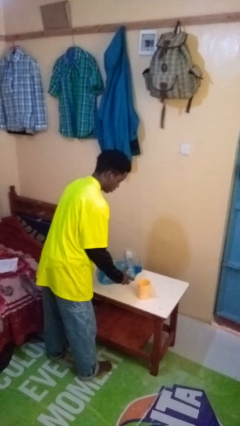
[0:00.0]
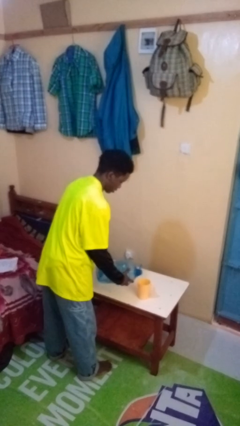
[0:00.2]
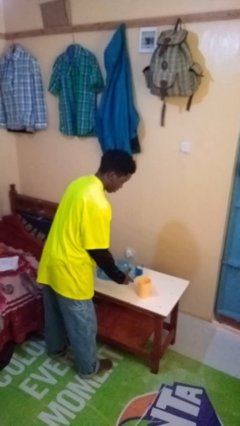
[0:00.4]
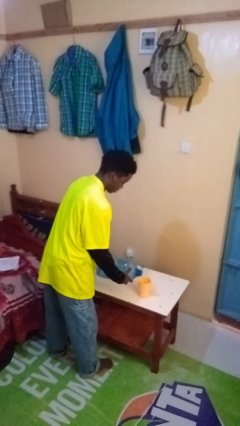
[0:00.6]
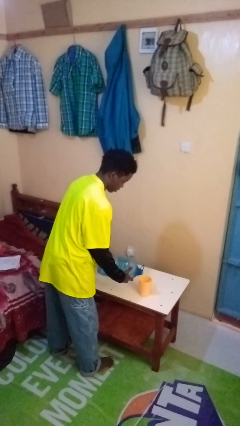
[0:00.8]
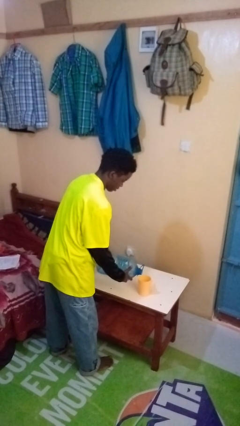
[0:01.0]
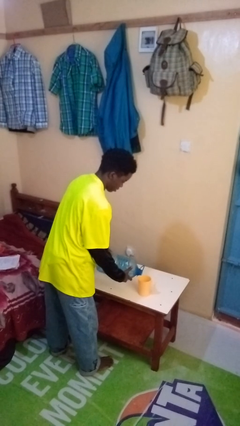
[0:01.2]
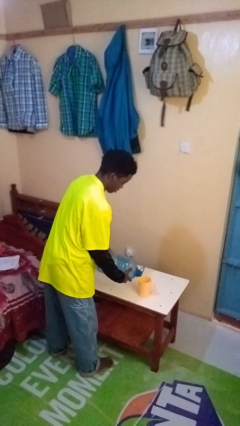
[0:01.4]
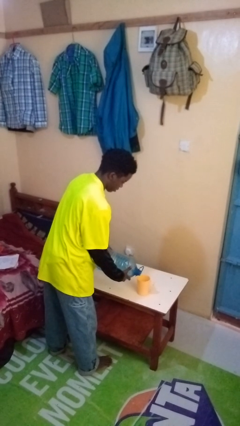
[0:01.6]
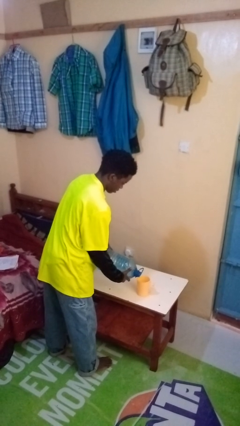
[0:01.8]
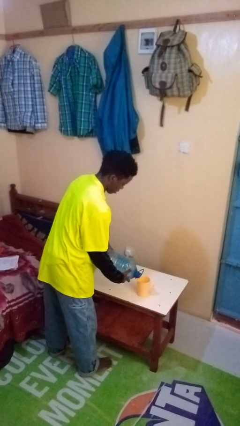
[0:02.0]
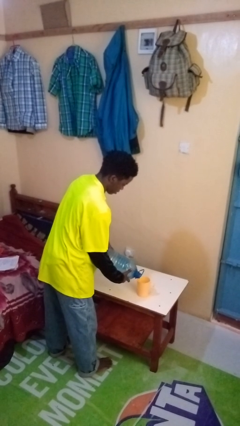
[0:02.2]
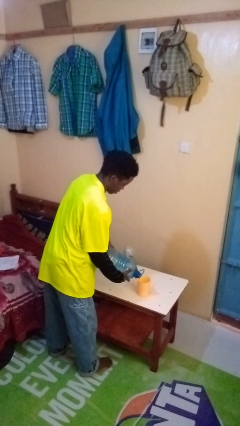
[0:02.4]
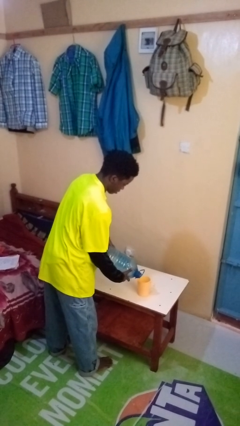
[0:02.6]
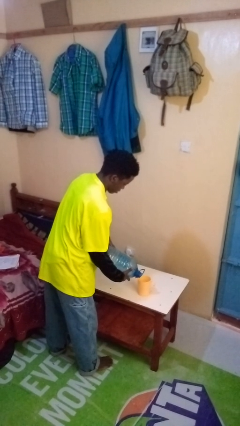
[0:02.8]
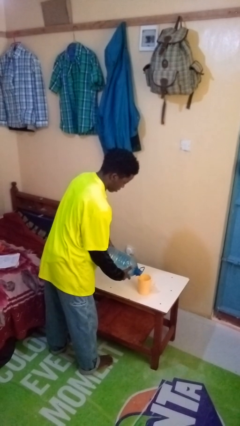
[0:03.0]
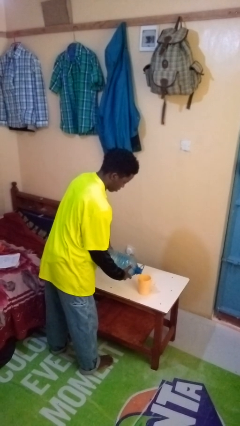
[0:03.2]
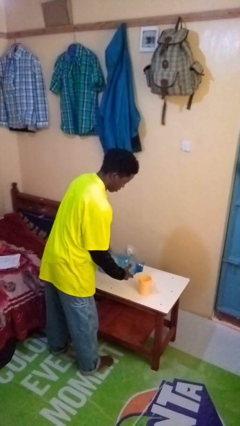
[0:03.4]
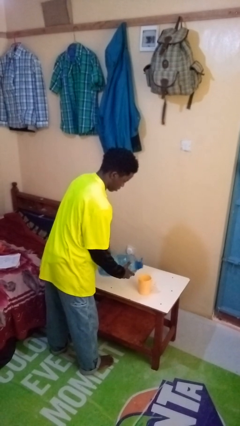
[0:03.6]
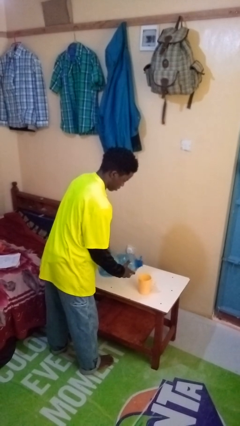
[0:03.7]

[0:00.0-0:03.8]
person pours liquid into cup

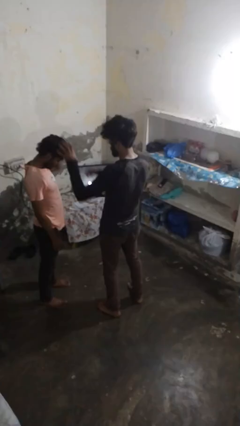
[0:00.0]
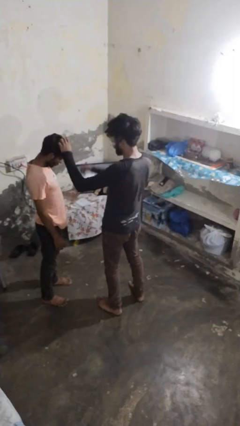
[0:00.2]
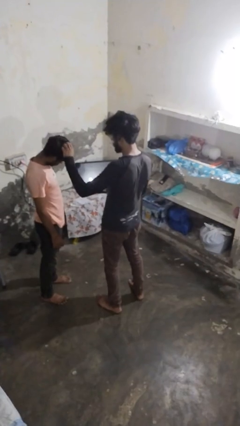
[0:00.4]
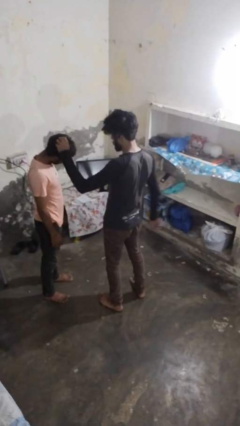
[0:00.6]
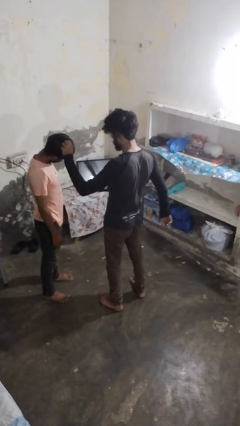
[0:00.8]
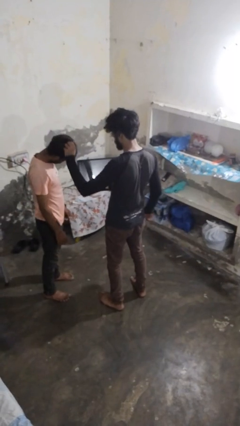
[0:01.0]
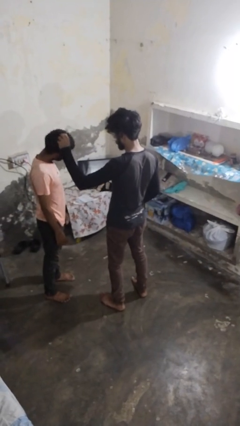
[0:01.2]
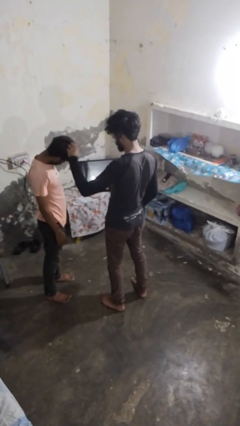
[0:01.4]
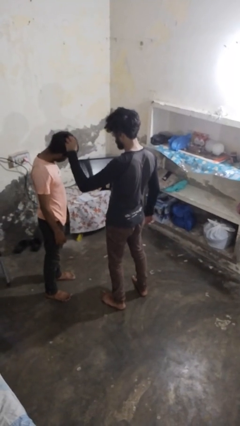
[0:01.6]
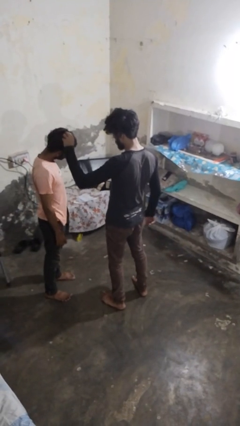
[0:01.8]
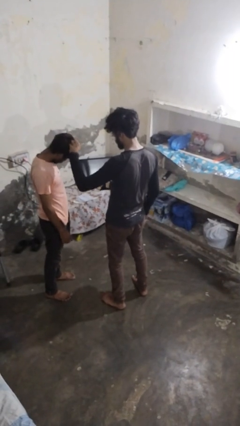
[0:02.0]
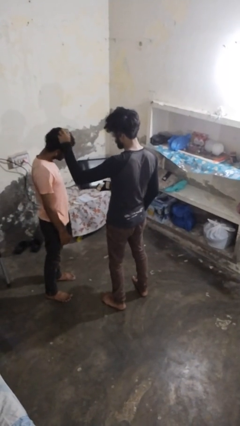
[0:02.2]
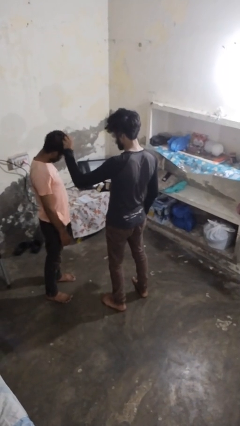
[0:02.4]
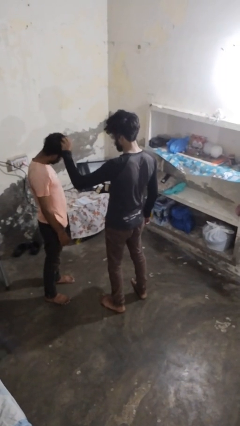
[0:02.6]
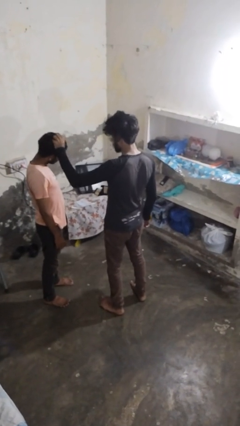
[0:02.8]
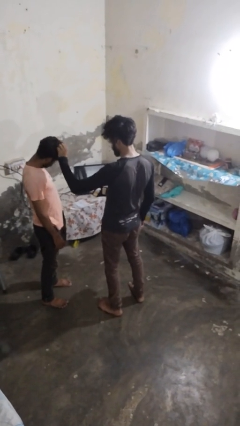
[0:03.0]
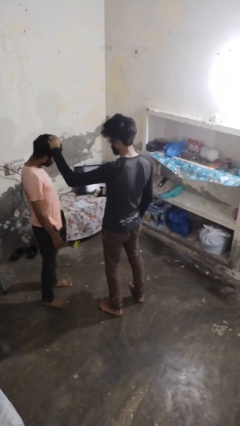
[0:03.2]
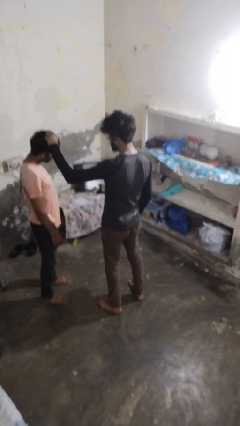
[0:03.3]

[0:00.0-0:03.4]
person grabs person by hair

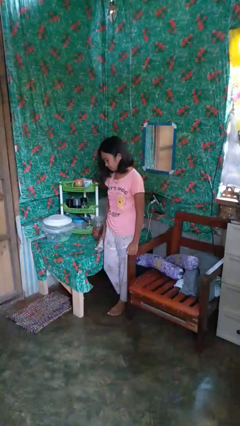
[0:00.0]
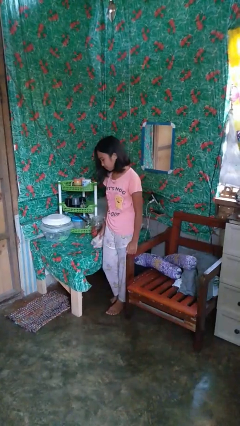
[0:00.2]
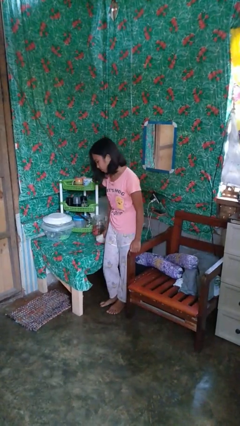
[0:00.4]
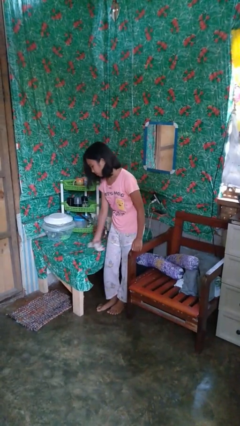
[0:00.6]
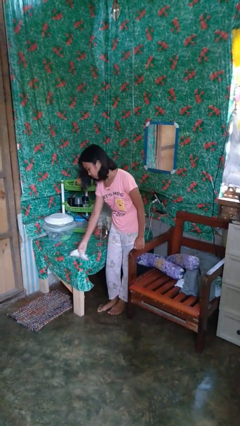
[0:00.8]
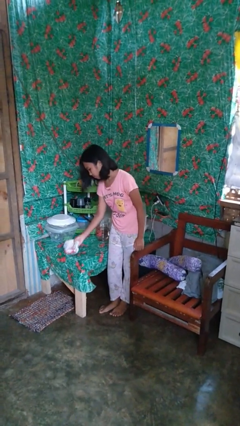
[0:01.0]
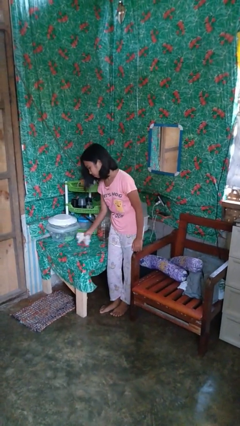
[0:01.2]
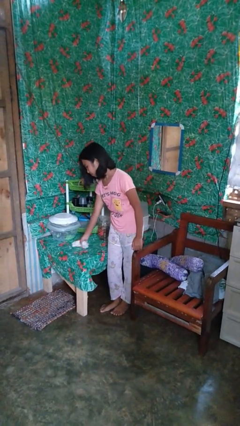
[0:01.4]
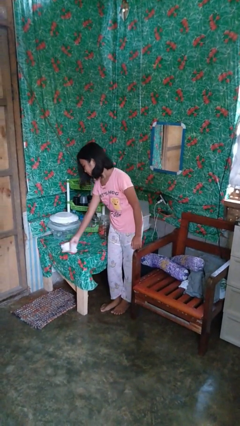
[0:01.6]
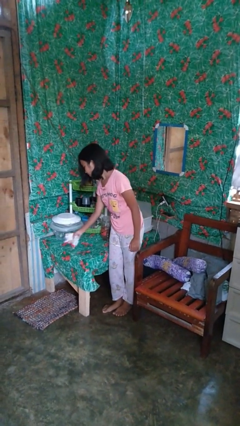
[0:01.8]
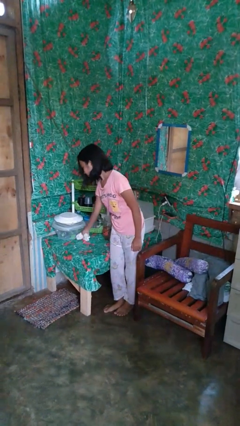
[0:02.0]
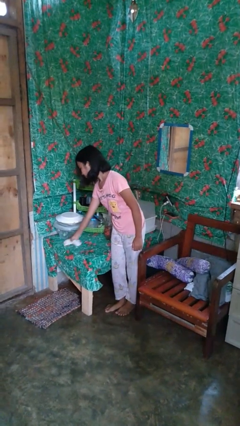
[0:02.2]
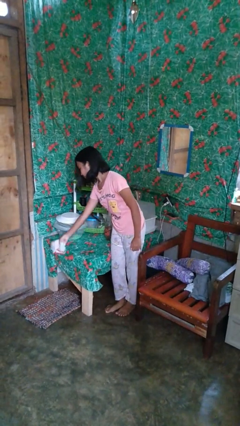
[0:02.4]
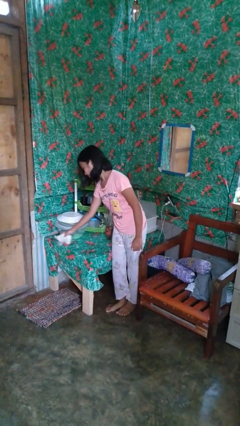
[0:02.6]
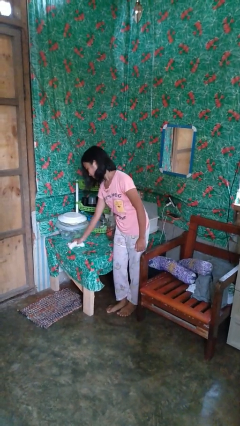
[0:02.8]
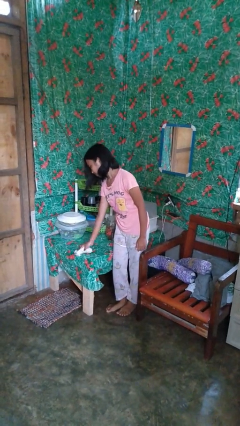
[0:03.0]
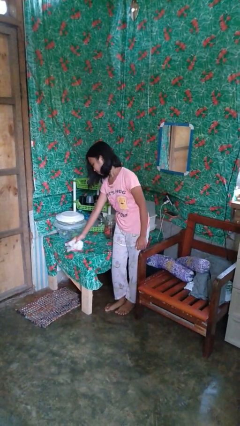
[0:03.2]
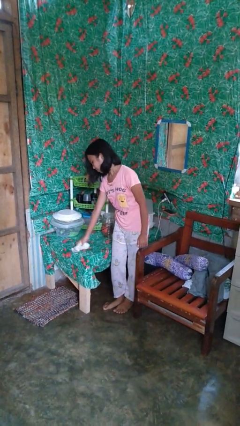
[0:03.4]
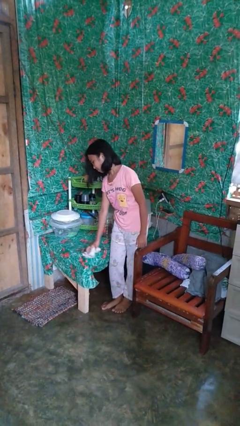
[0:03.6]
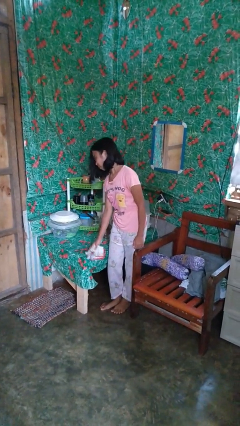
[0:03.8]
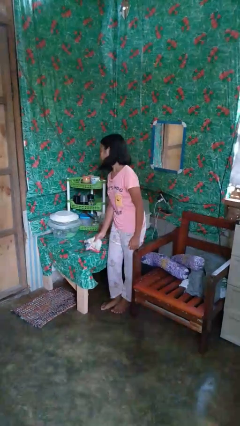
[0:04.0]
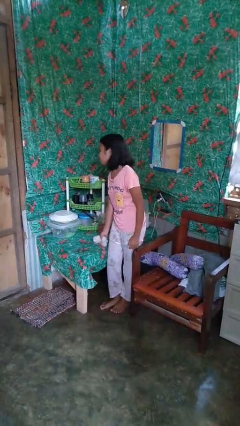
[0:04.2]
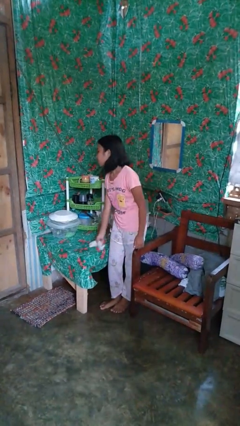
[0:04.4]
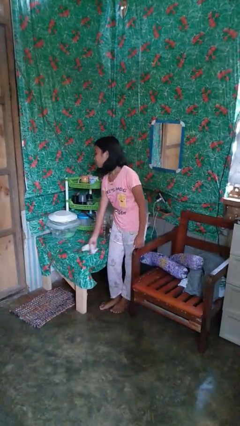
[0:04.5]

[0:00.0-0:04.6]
person cleans table with rag

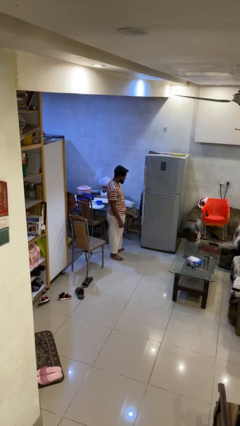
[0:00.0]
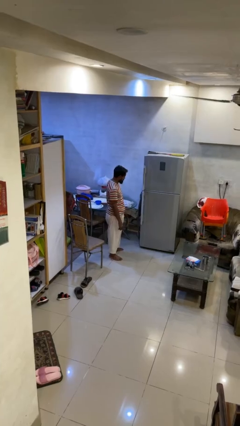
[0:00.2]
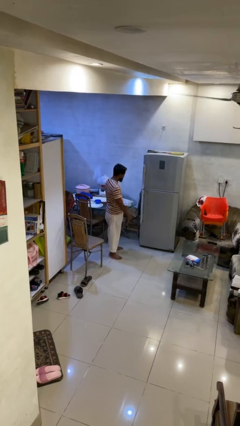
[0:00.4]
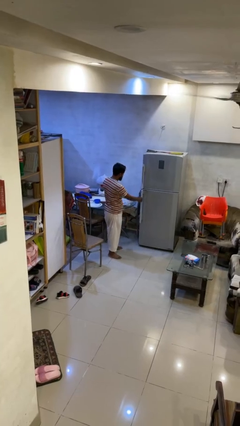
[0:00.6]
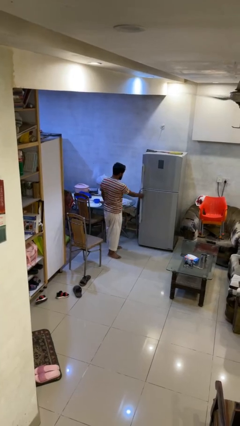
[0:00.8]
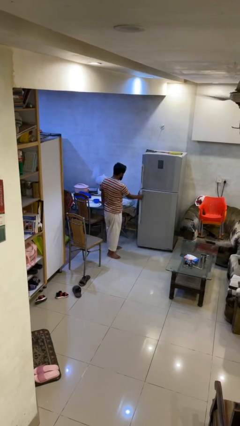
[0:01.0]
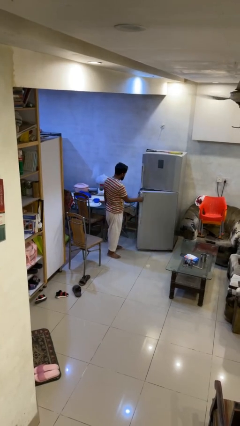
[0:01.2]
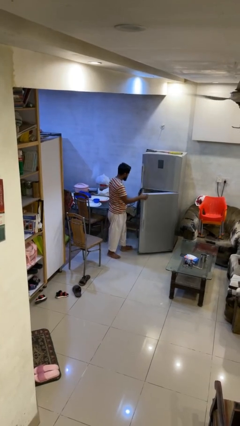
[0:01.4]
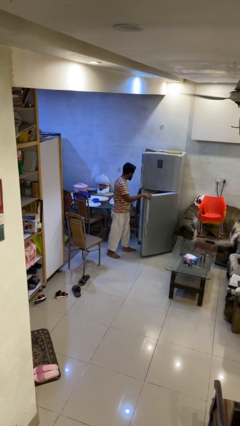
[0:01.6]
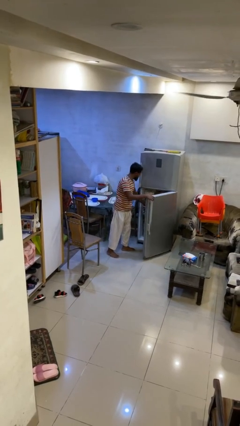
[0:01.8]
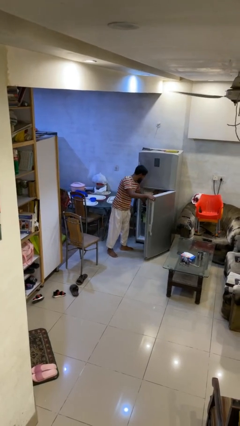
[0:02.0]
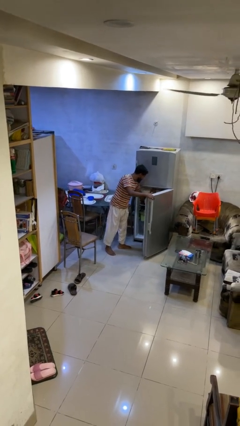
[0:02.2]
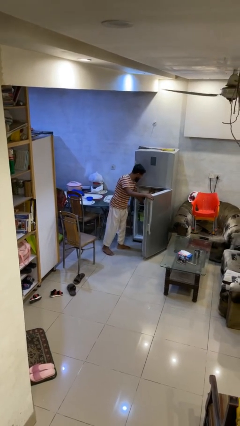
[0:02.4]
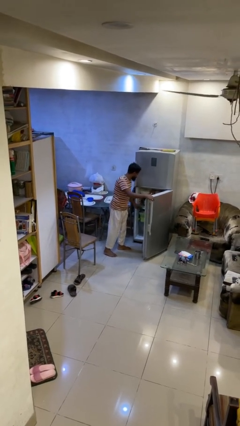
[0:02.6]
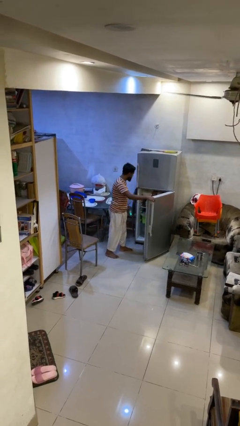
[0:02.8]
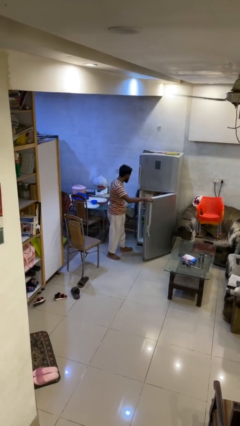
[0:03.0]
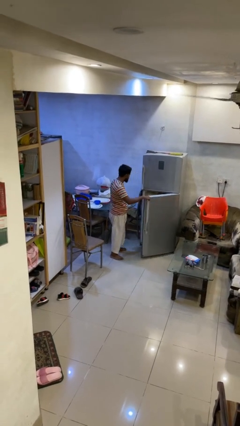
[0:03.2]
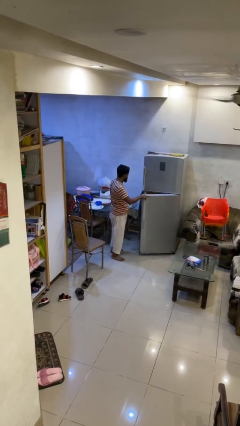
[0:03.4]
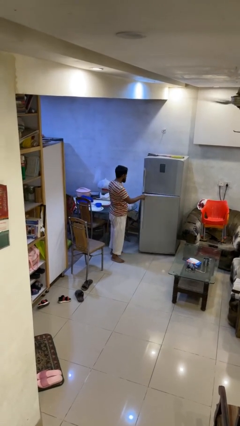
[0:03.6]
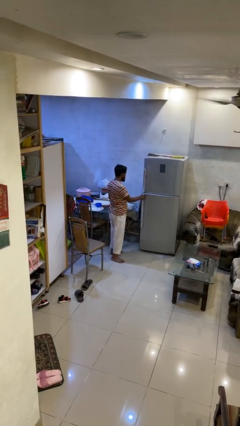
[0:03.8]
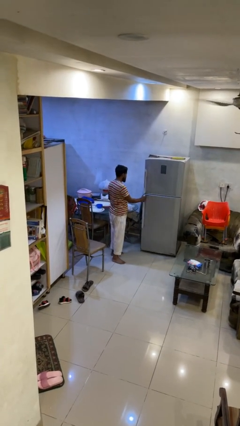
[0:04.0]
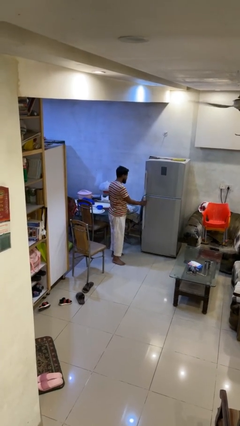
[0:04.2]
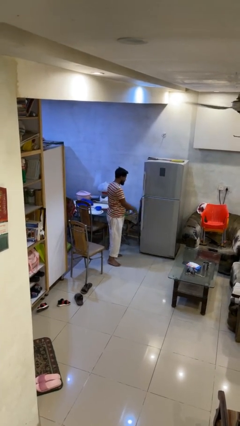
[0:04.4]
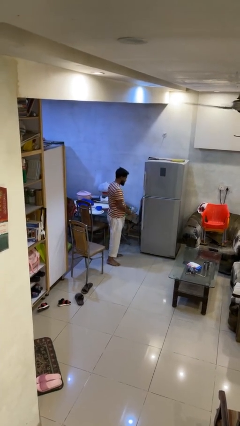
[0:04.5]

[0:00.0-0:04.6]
person takes object from refrigerator

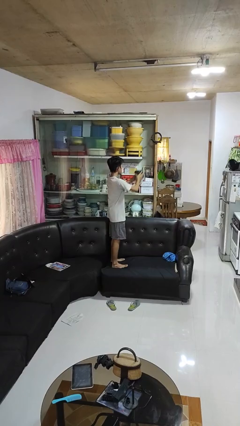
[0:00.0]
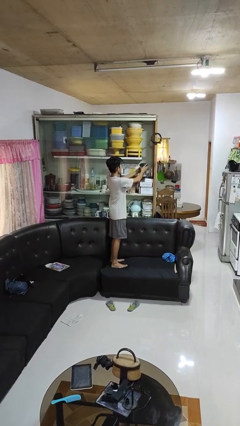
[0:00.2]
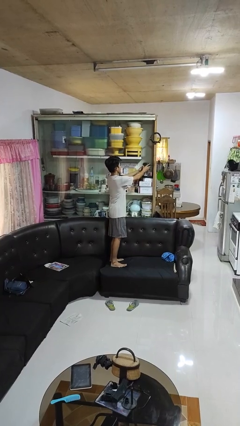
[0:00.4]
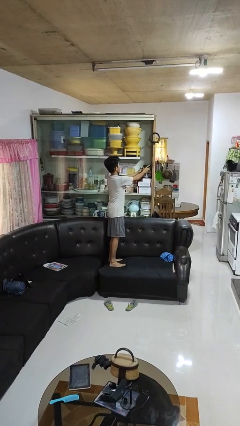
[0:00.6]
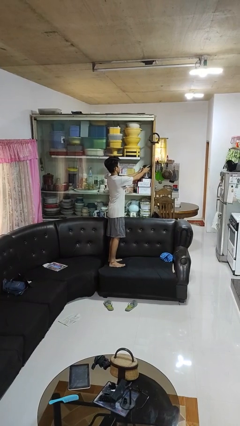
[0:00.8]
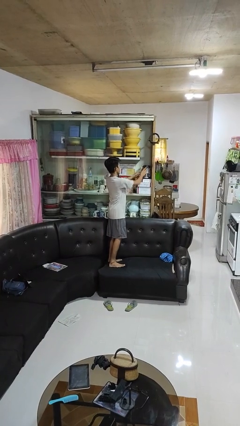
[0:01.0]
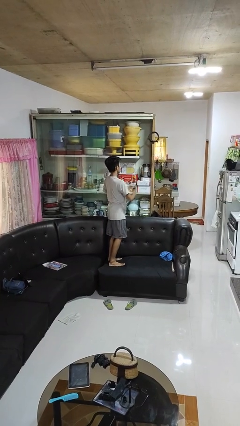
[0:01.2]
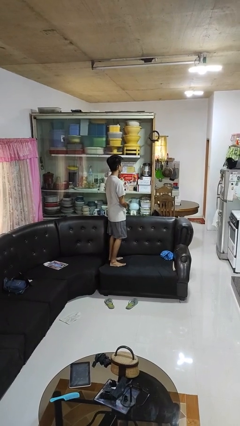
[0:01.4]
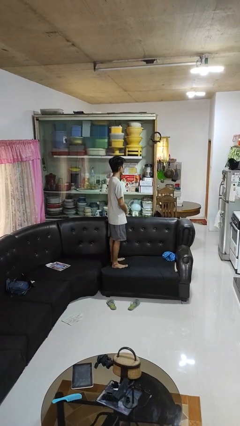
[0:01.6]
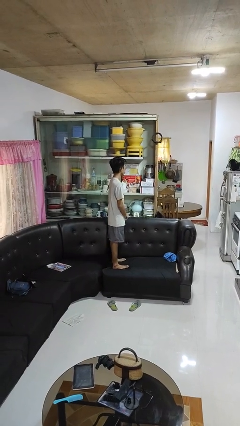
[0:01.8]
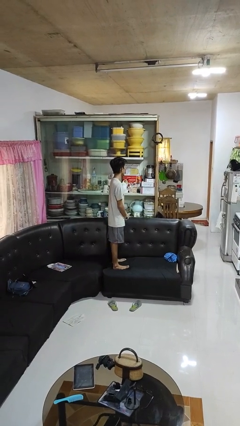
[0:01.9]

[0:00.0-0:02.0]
person puts down object into cabinet
